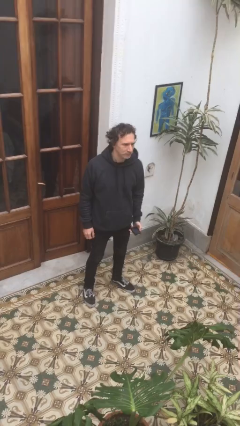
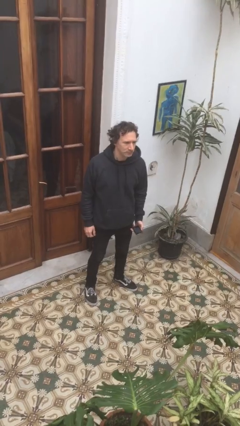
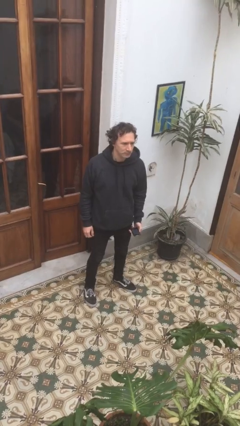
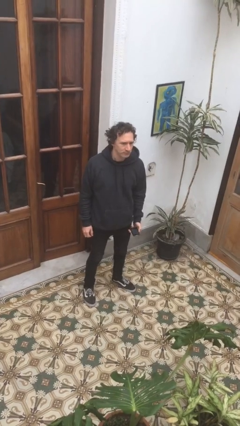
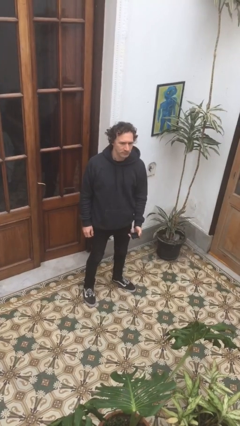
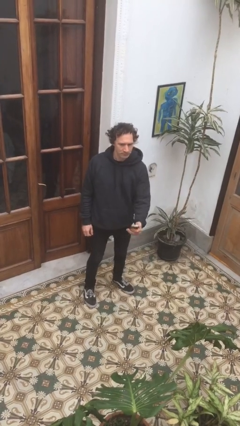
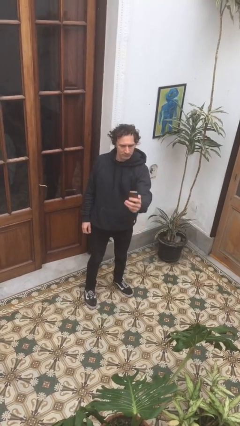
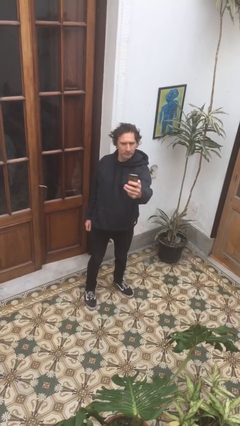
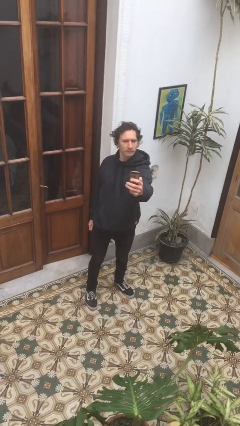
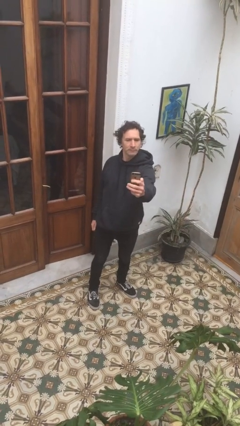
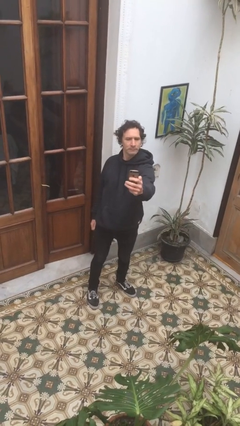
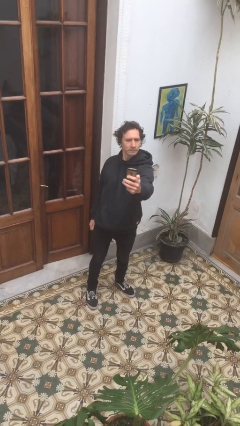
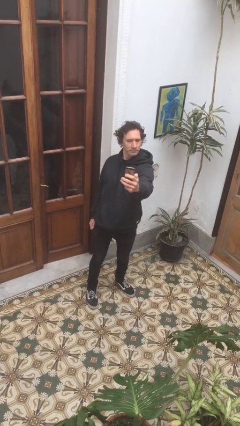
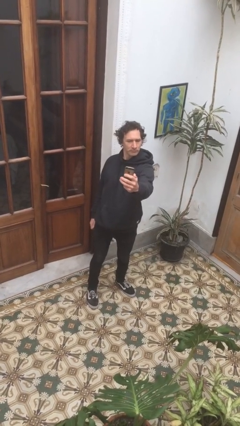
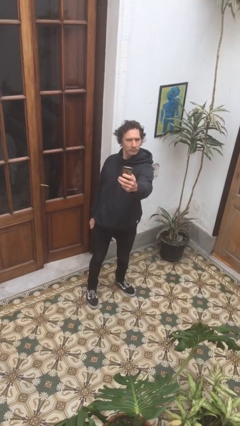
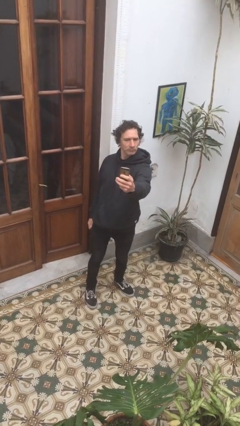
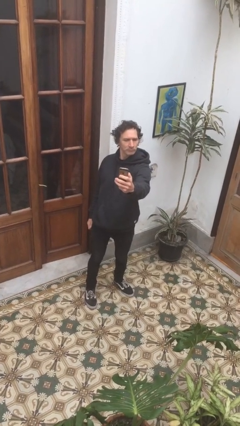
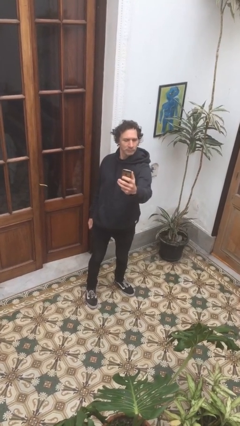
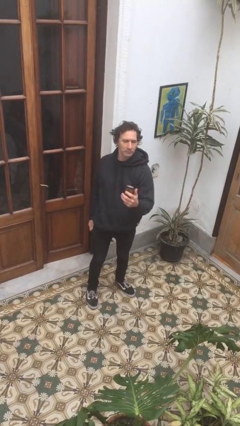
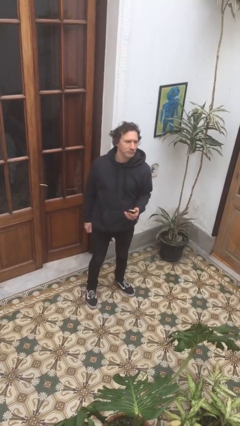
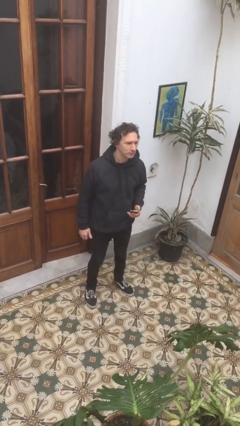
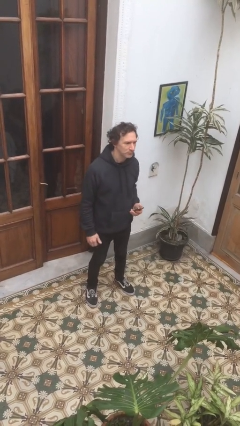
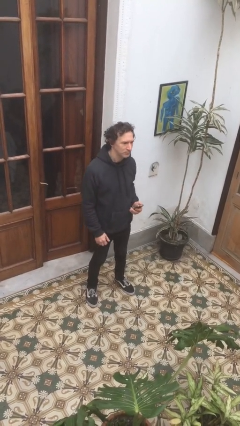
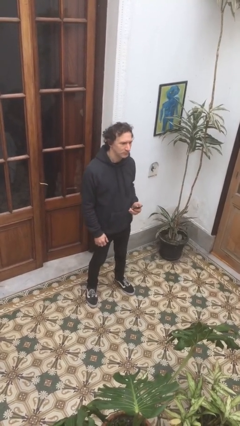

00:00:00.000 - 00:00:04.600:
person takes selfie

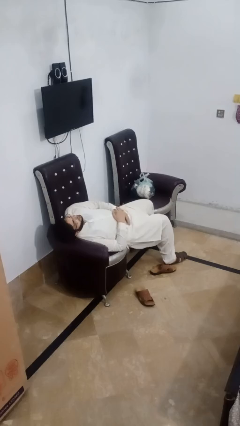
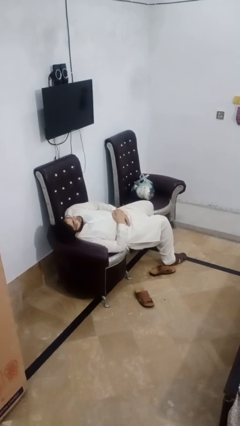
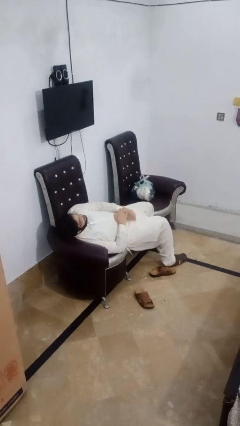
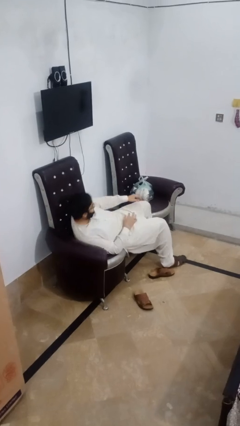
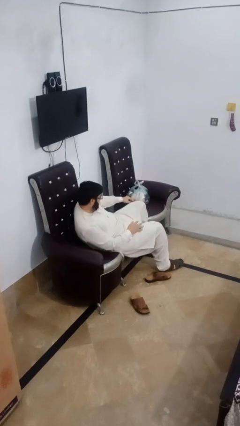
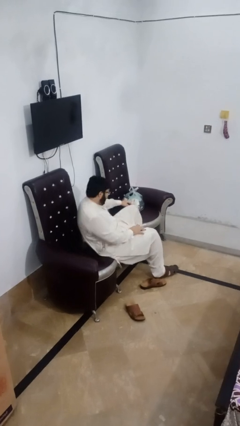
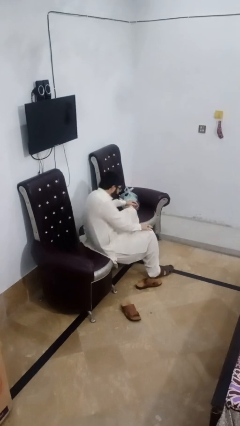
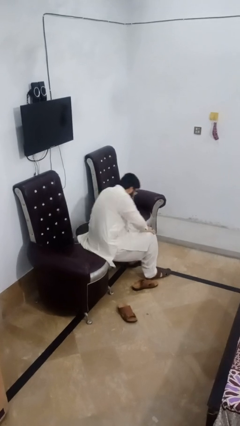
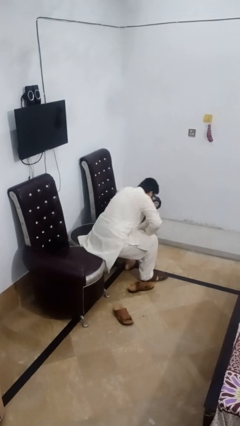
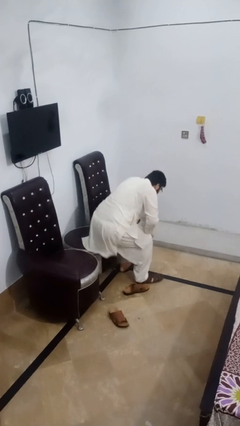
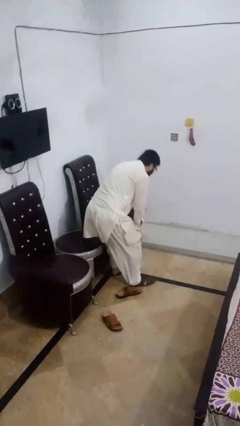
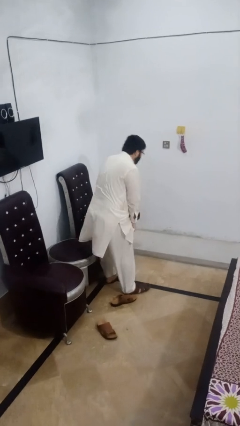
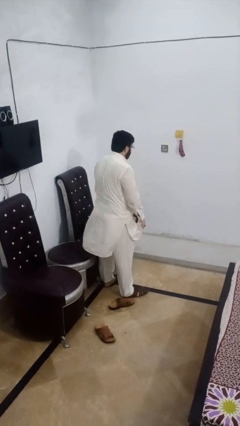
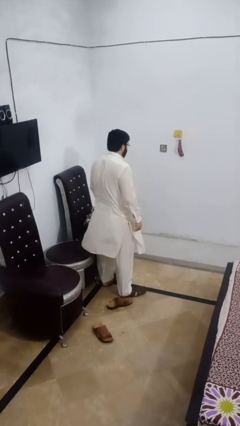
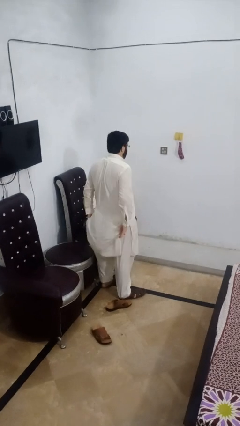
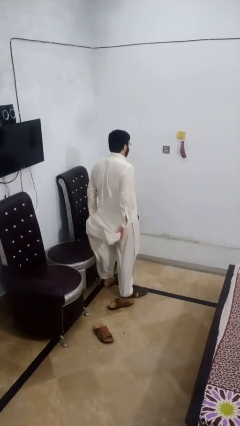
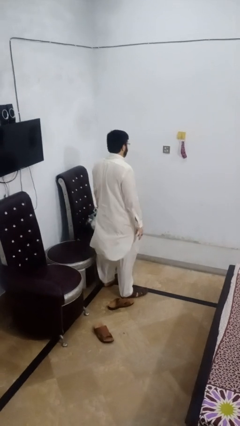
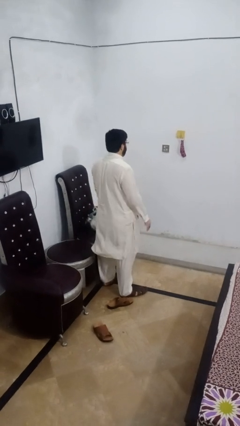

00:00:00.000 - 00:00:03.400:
person stands up

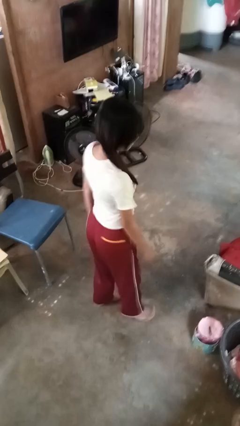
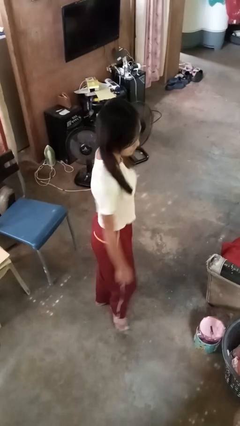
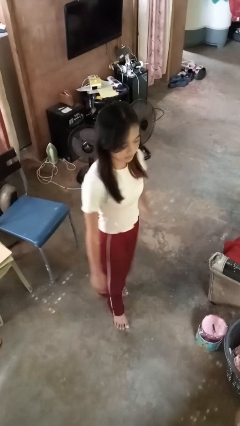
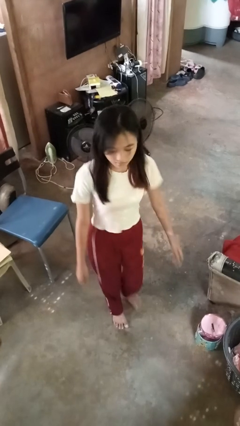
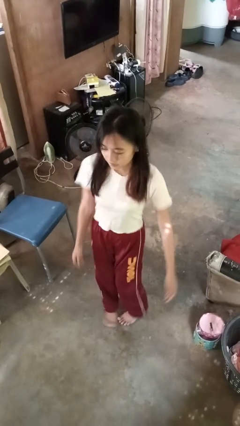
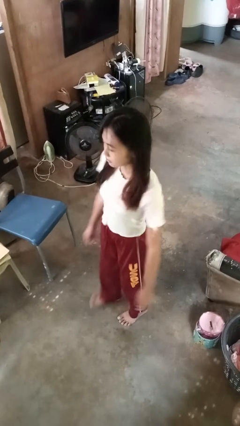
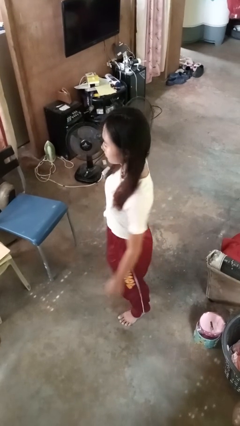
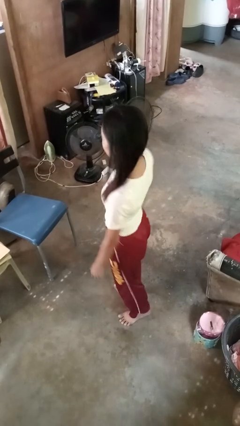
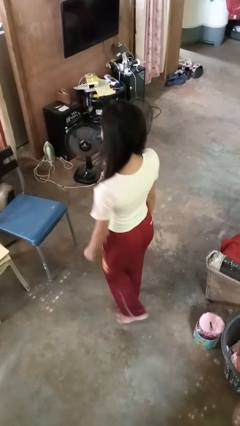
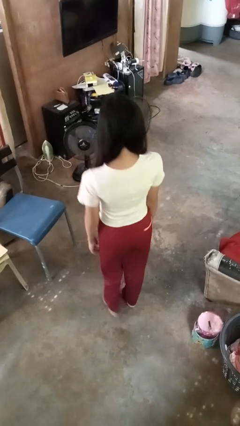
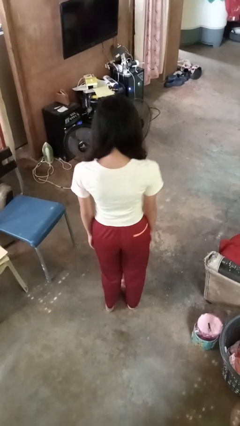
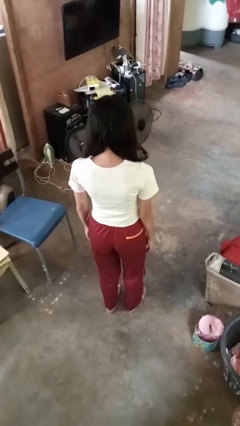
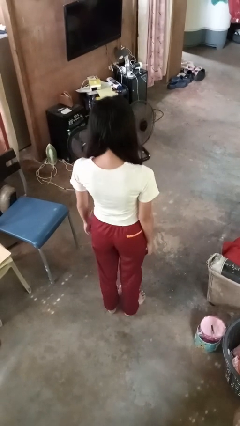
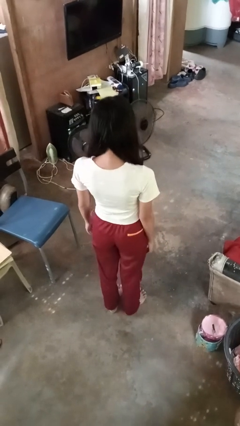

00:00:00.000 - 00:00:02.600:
person twirls

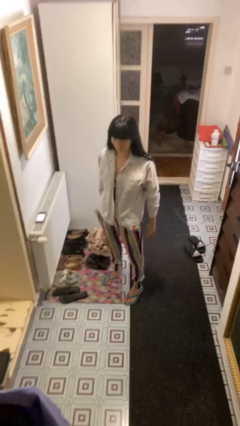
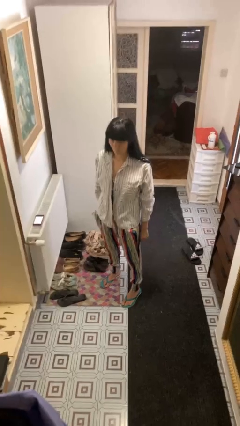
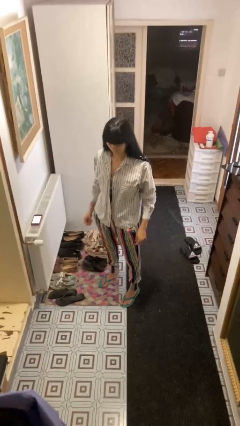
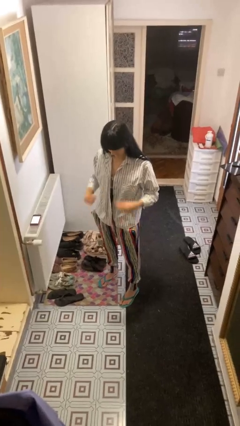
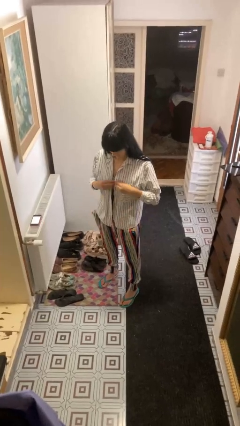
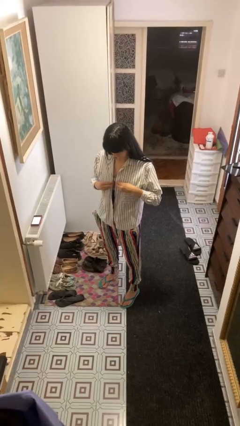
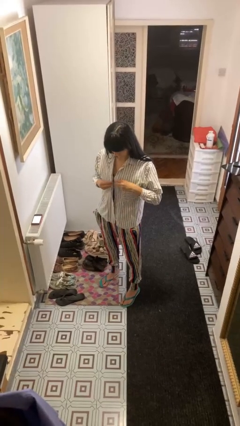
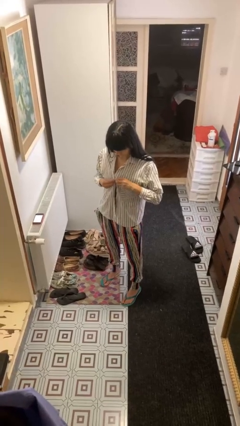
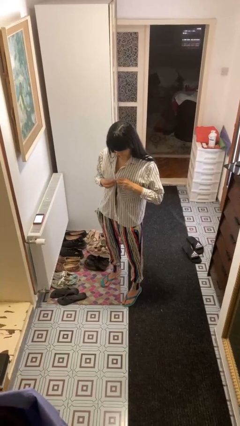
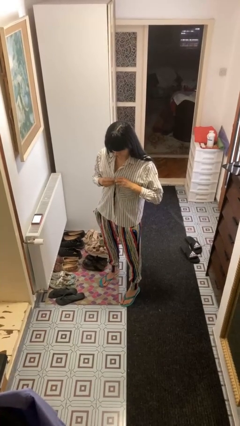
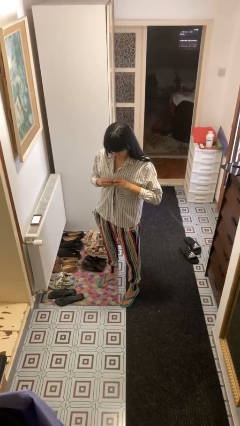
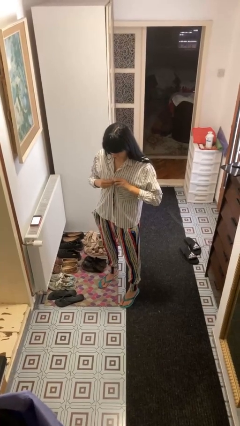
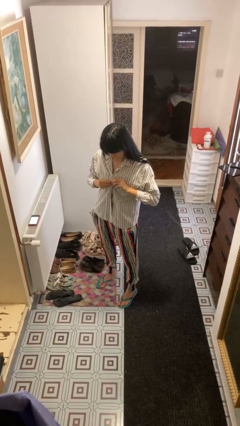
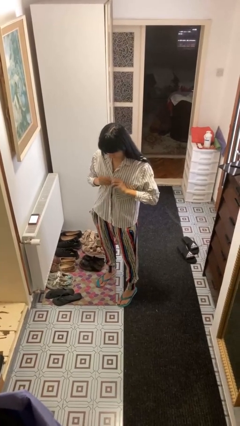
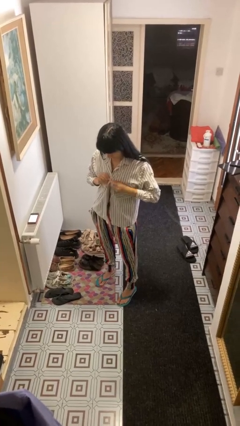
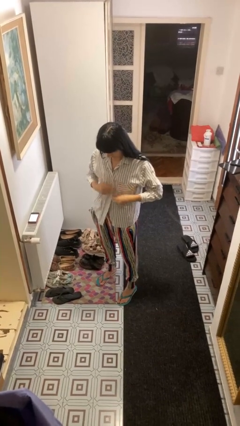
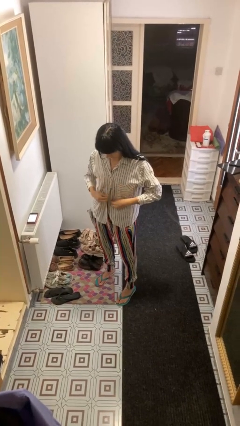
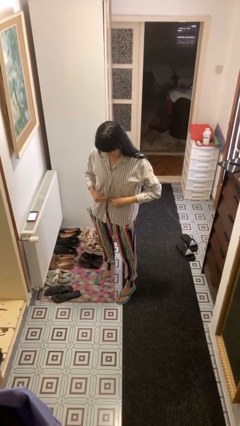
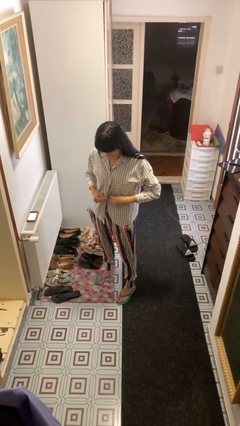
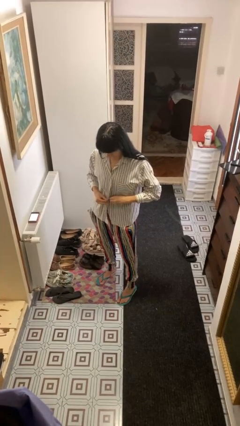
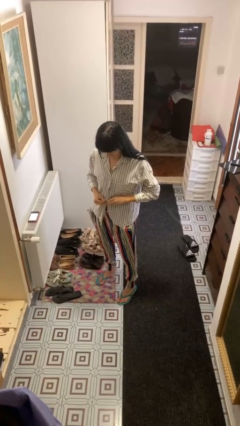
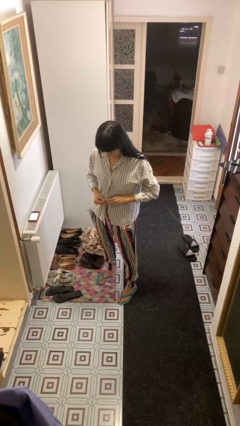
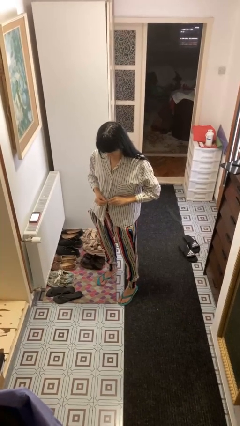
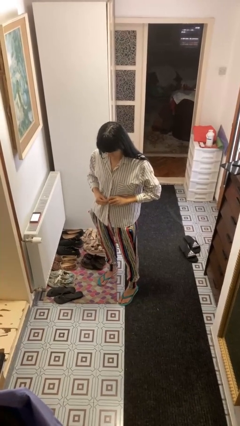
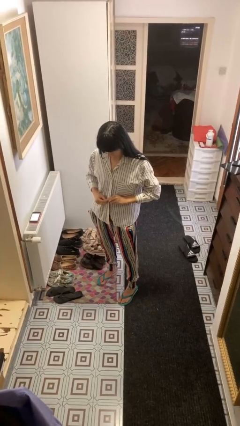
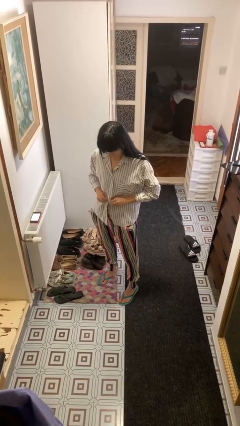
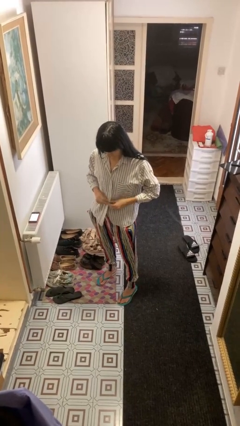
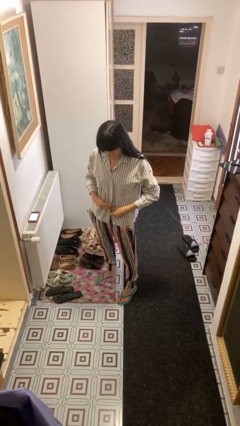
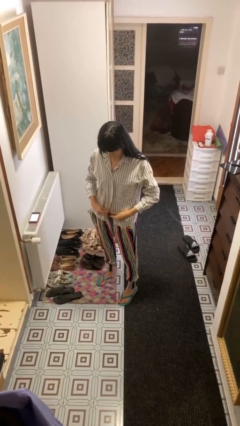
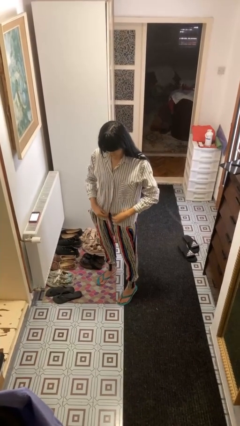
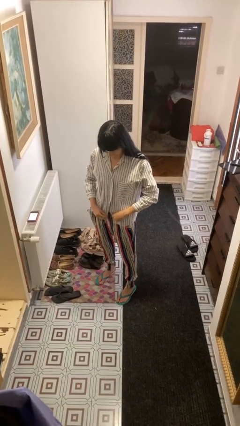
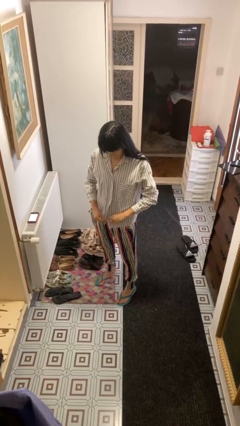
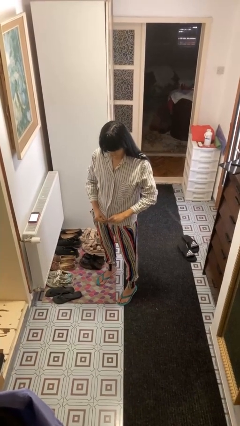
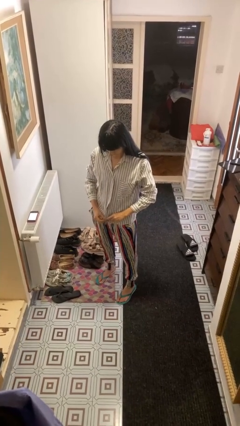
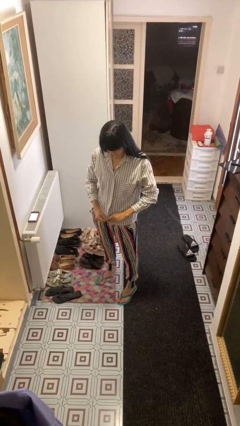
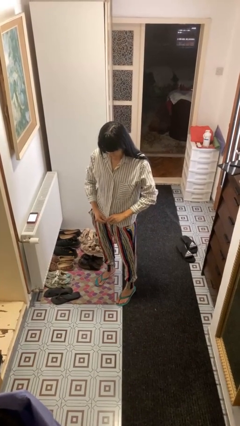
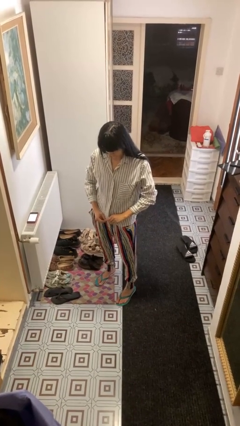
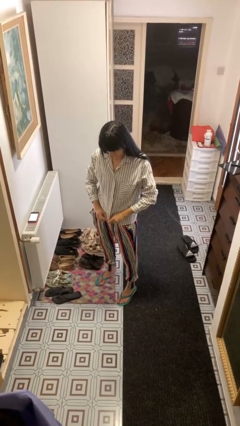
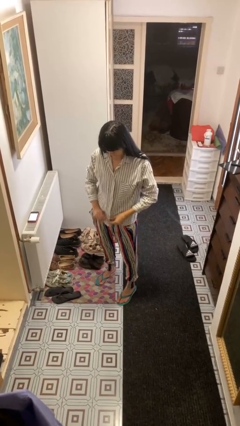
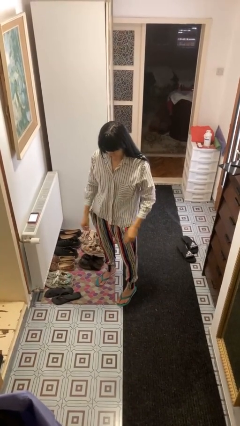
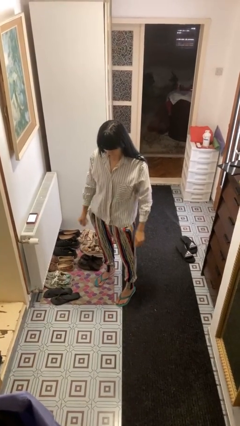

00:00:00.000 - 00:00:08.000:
person buttons shirt
